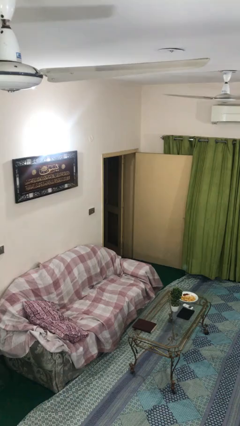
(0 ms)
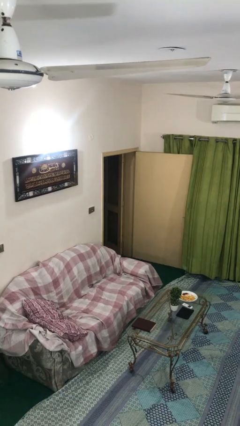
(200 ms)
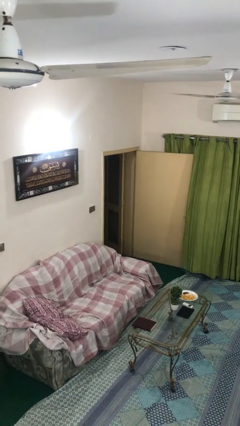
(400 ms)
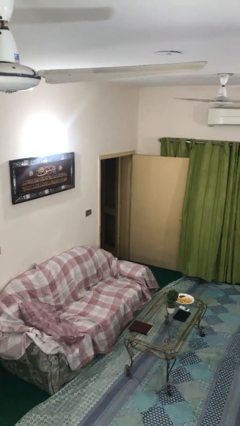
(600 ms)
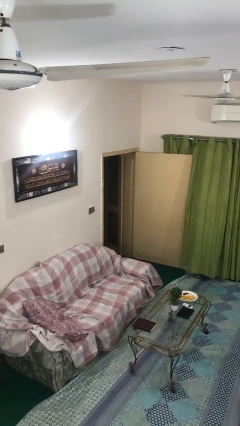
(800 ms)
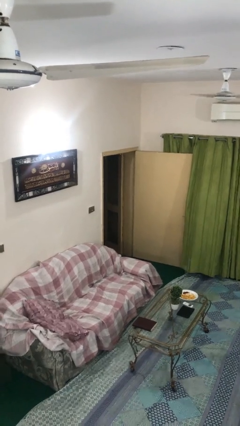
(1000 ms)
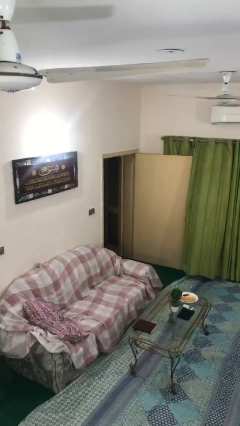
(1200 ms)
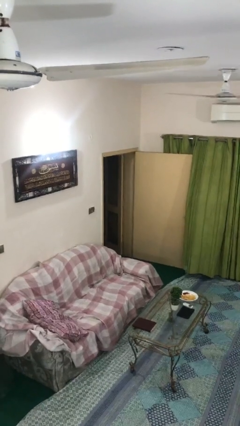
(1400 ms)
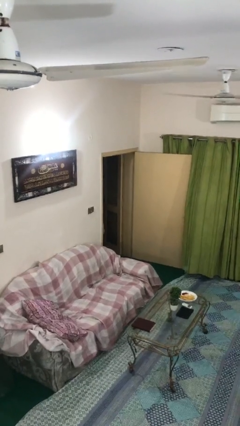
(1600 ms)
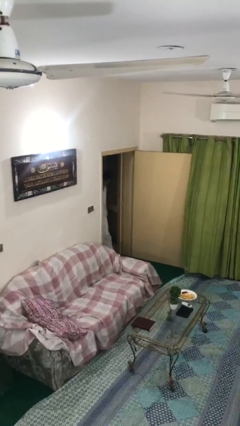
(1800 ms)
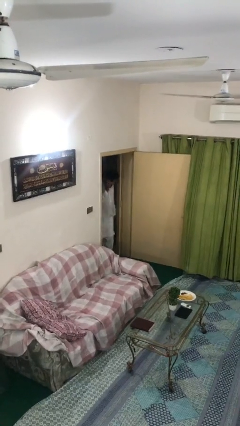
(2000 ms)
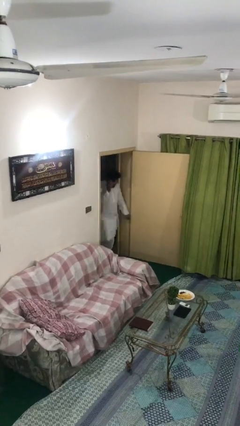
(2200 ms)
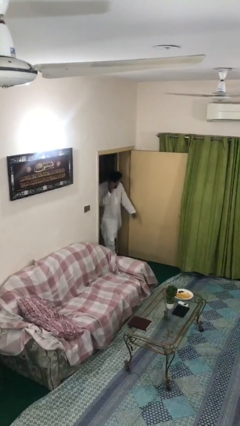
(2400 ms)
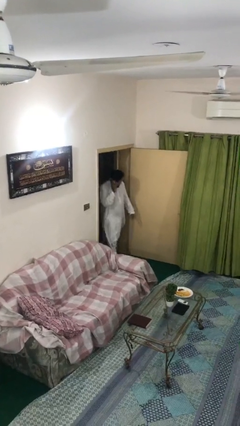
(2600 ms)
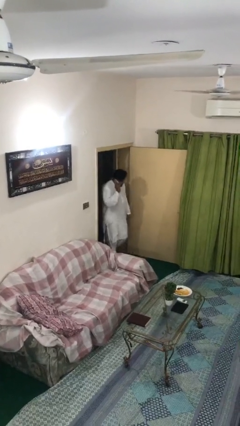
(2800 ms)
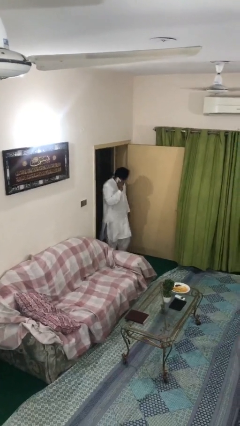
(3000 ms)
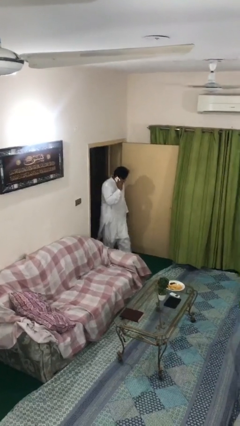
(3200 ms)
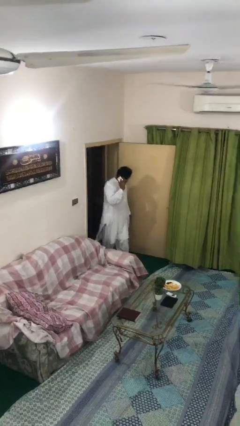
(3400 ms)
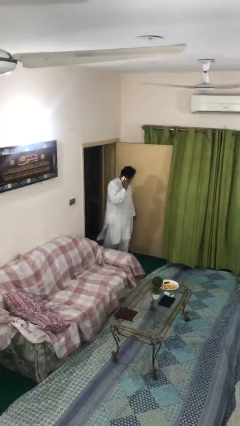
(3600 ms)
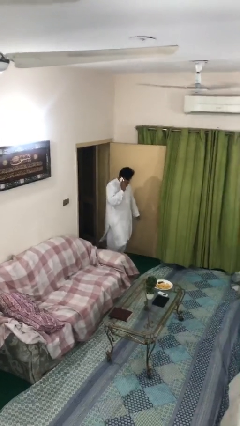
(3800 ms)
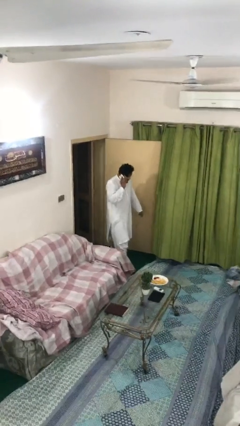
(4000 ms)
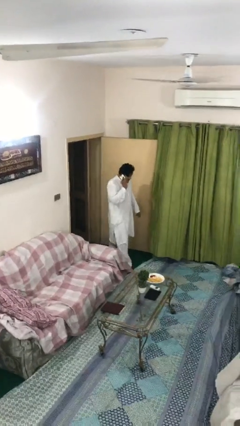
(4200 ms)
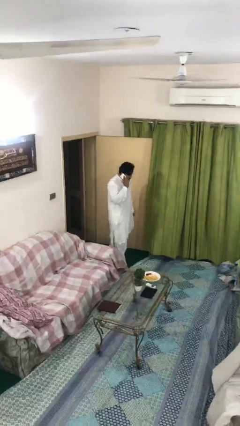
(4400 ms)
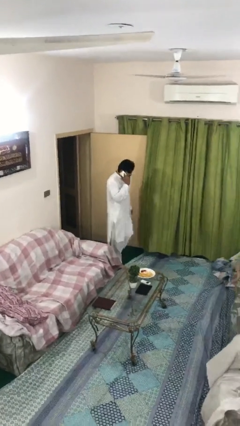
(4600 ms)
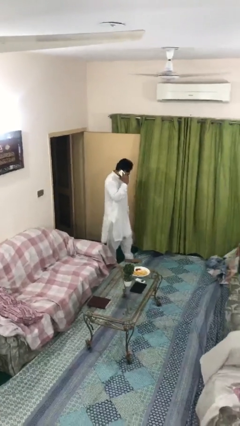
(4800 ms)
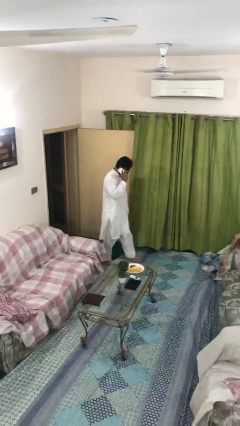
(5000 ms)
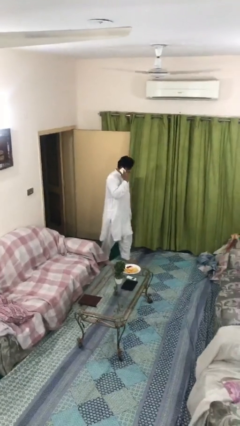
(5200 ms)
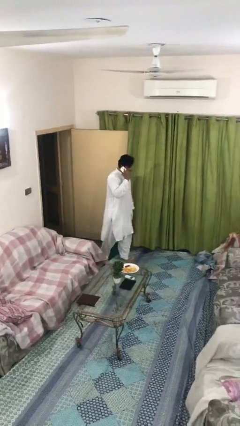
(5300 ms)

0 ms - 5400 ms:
person enters scene through structure

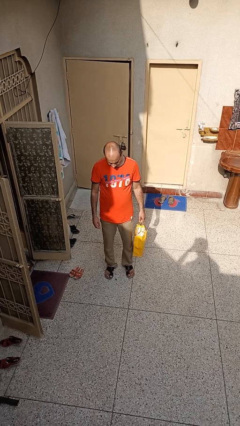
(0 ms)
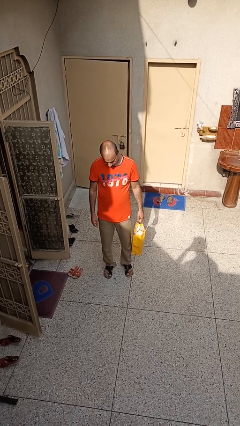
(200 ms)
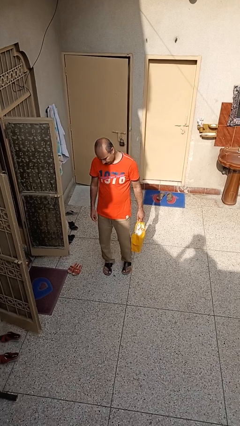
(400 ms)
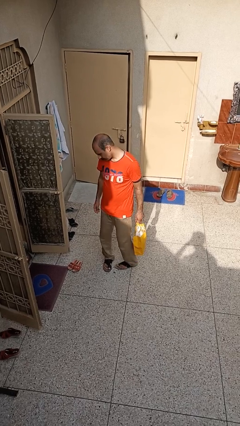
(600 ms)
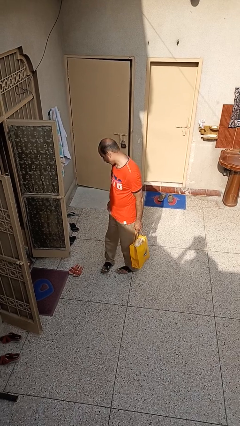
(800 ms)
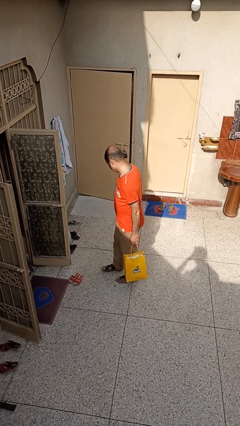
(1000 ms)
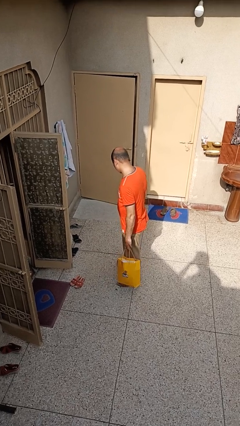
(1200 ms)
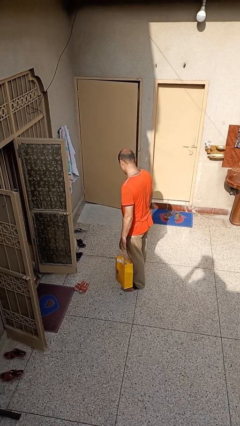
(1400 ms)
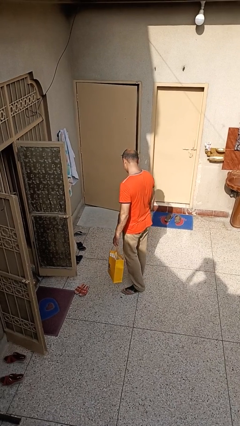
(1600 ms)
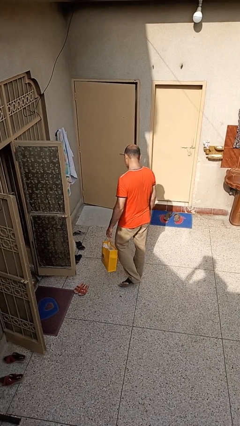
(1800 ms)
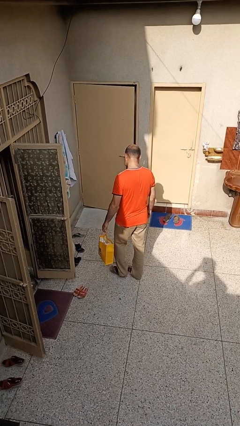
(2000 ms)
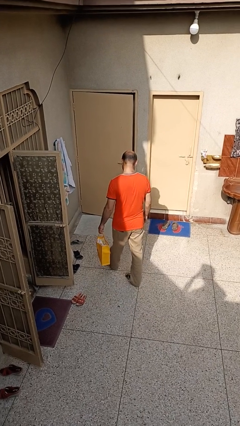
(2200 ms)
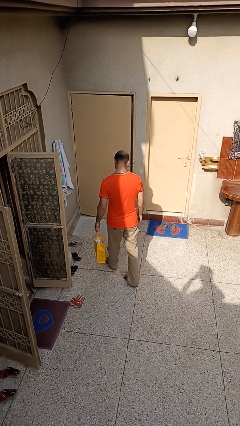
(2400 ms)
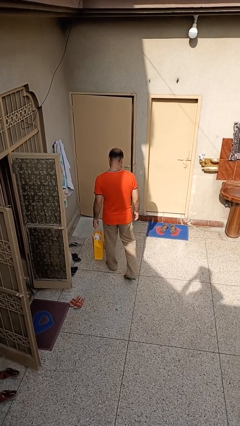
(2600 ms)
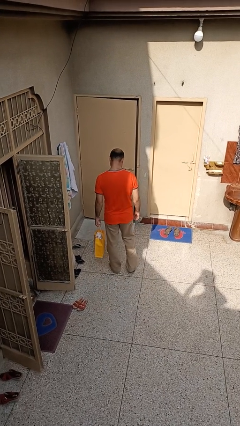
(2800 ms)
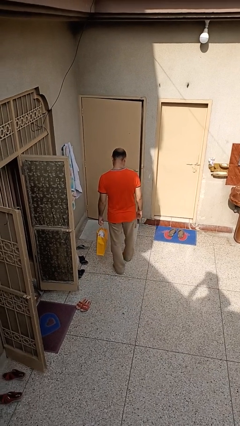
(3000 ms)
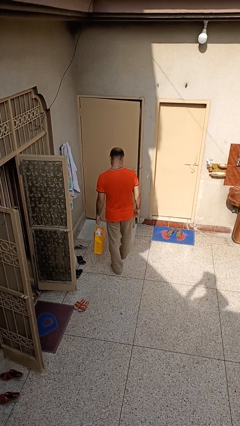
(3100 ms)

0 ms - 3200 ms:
person carries groceries

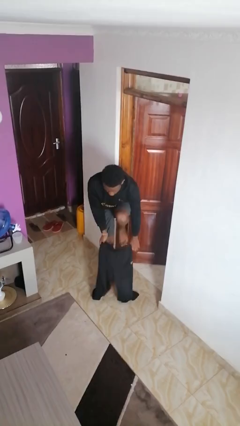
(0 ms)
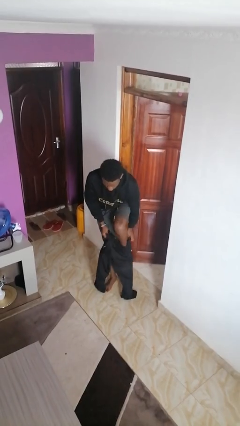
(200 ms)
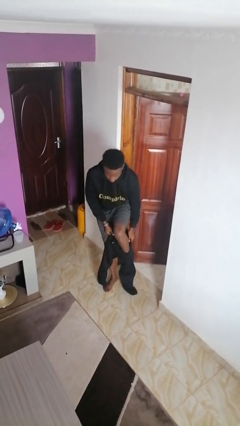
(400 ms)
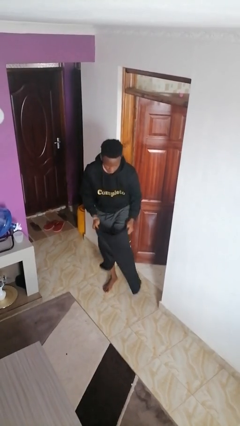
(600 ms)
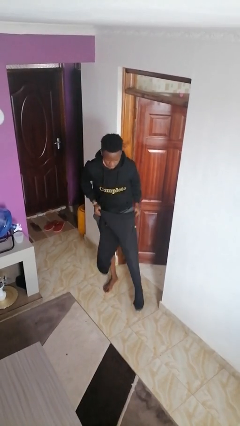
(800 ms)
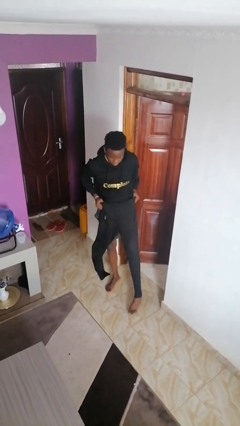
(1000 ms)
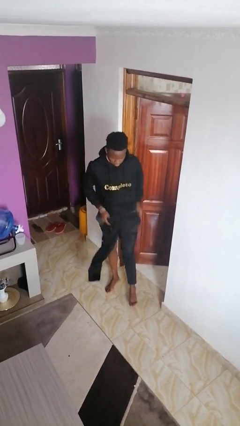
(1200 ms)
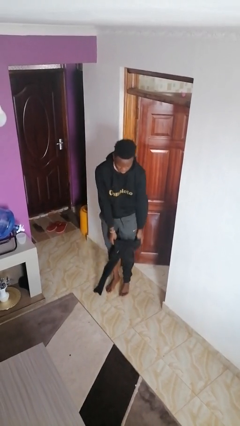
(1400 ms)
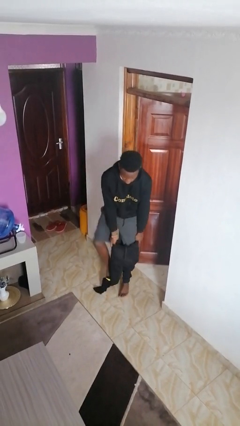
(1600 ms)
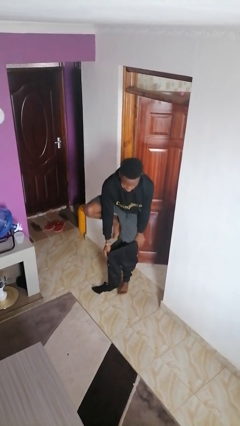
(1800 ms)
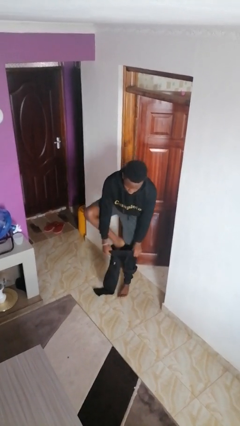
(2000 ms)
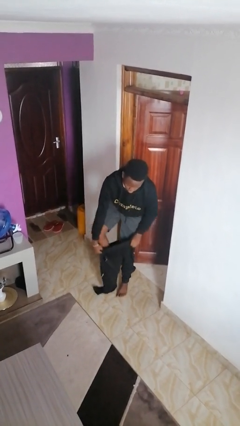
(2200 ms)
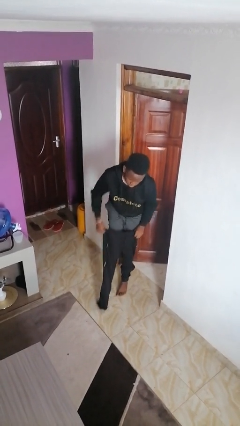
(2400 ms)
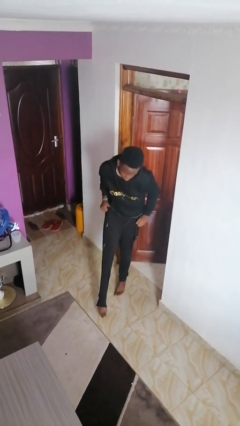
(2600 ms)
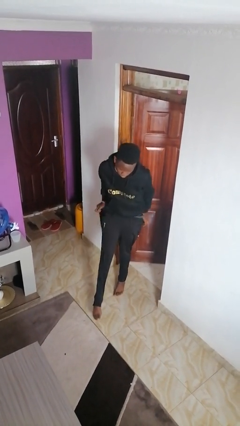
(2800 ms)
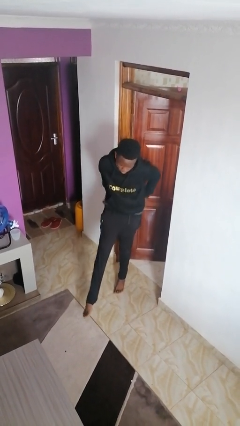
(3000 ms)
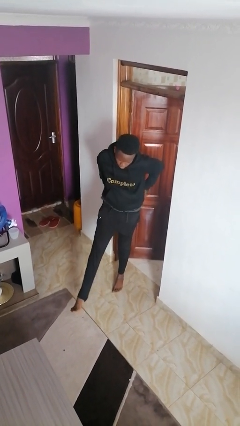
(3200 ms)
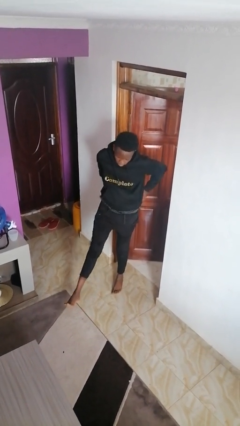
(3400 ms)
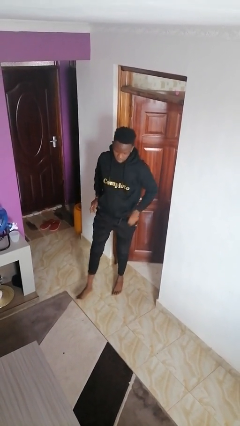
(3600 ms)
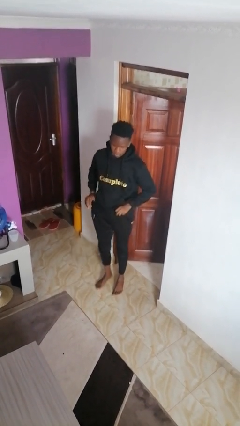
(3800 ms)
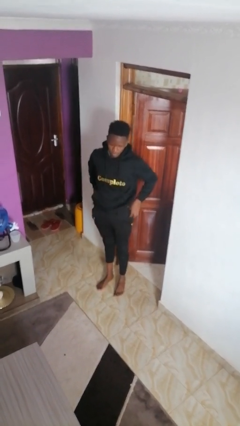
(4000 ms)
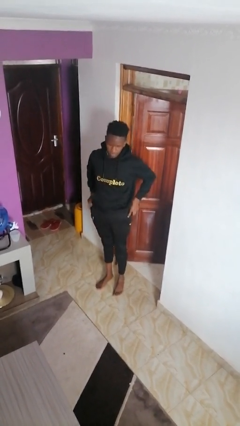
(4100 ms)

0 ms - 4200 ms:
person puts on pants

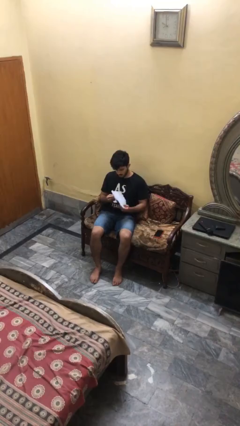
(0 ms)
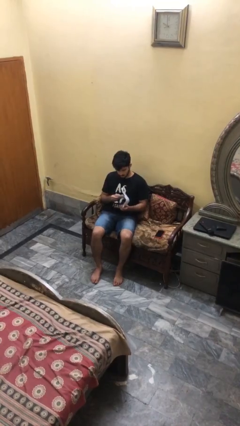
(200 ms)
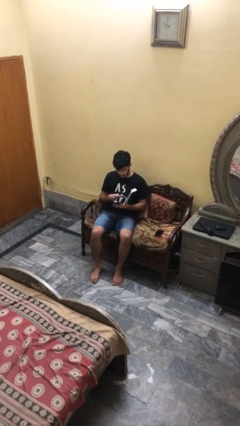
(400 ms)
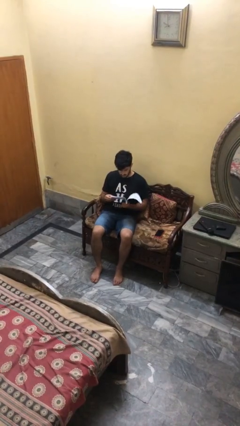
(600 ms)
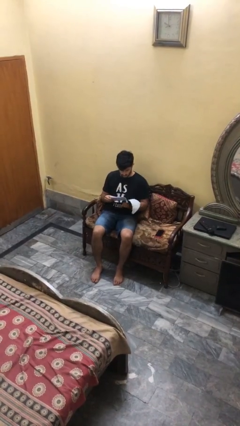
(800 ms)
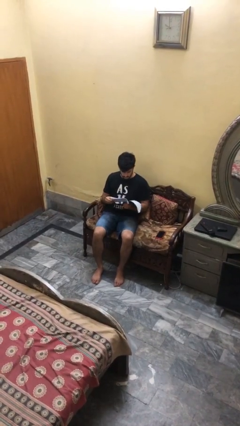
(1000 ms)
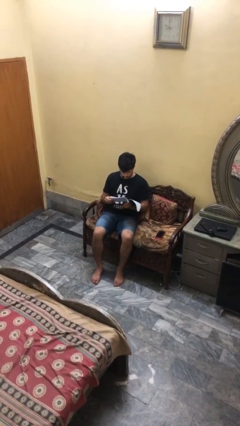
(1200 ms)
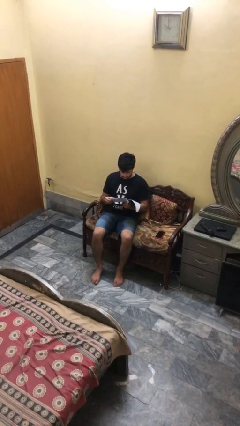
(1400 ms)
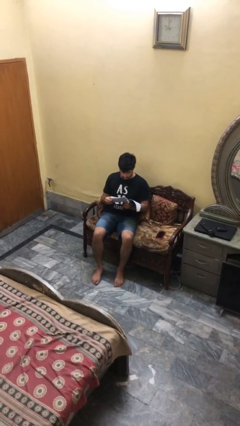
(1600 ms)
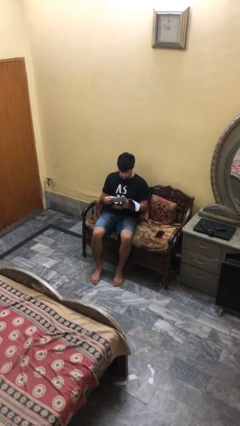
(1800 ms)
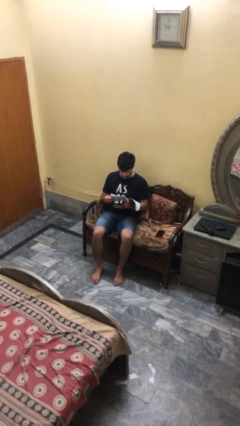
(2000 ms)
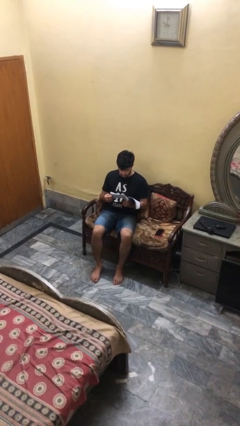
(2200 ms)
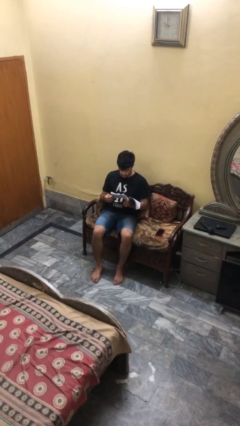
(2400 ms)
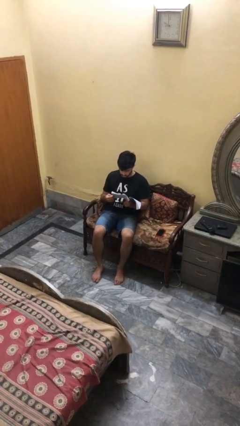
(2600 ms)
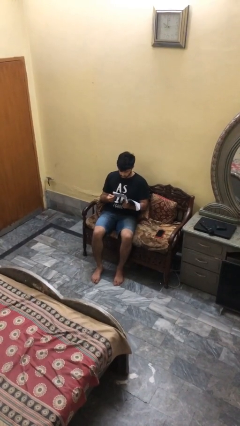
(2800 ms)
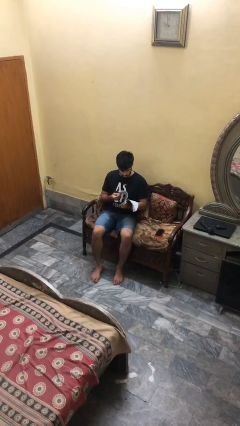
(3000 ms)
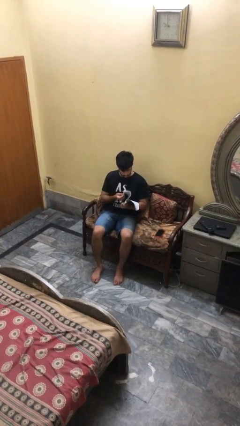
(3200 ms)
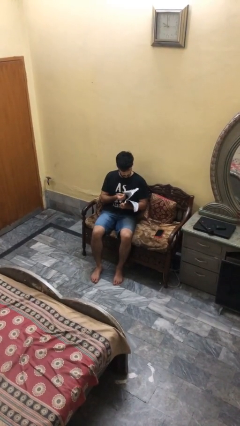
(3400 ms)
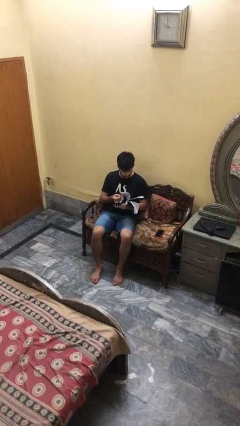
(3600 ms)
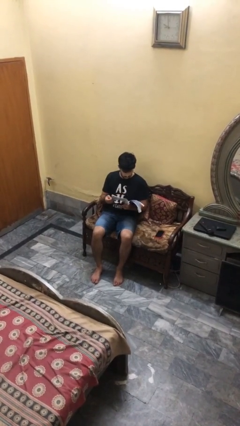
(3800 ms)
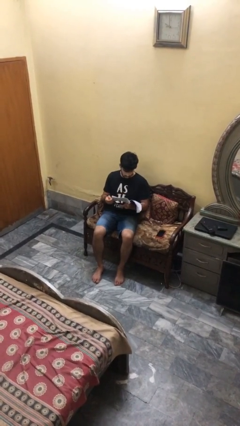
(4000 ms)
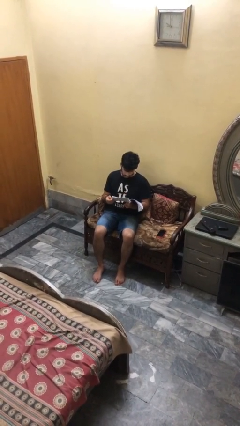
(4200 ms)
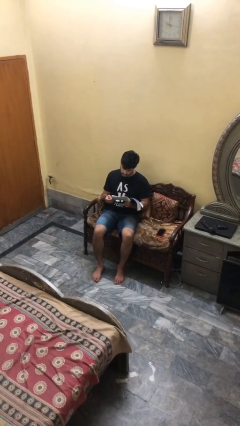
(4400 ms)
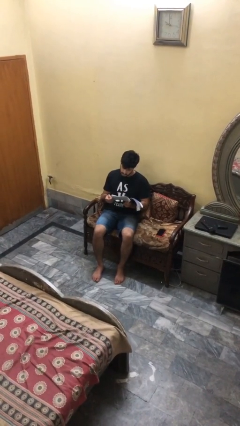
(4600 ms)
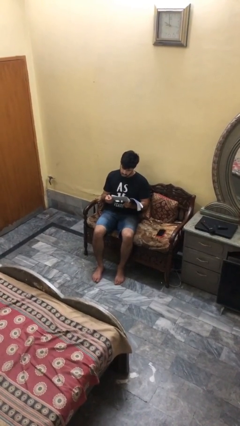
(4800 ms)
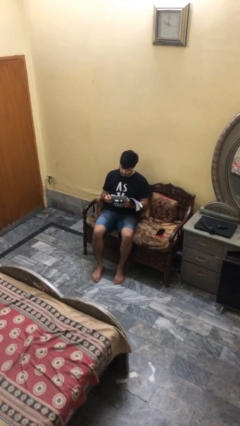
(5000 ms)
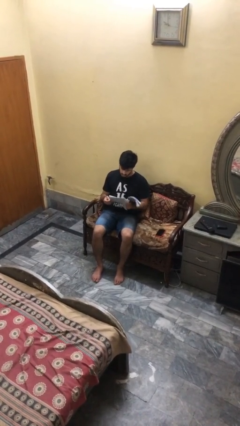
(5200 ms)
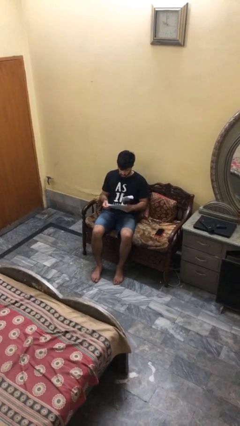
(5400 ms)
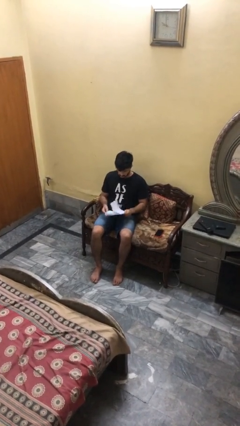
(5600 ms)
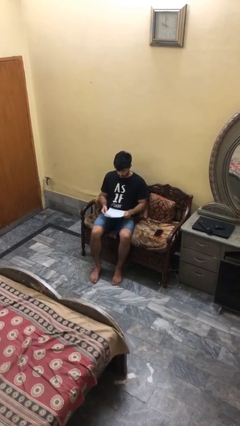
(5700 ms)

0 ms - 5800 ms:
person reads magazine
